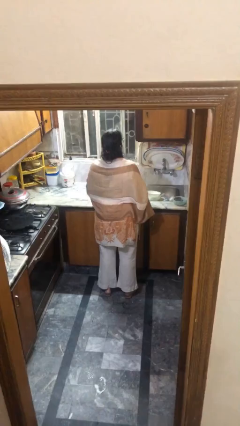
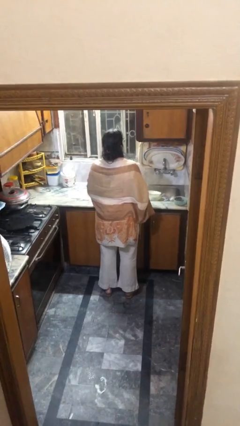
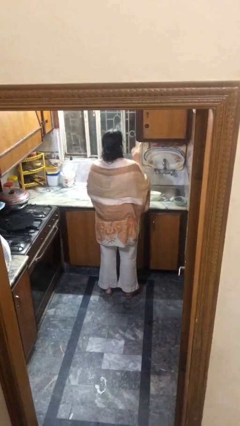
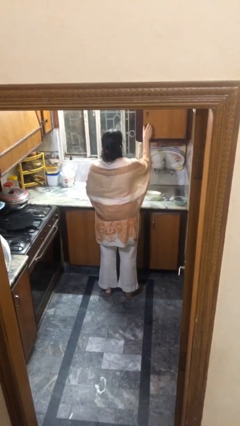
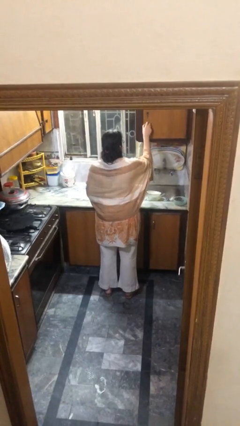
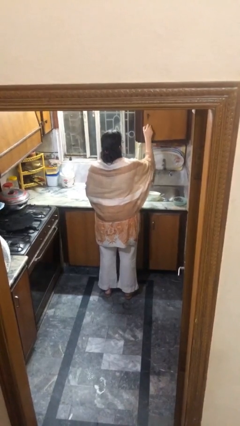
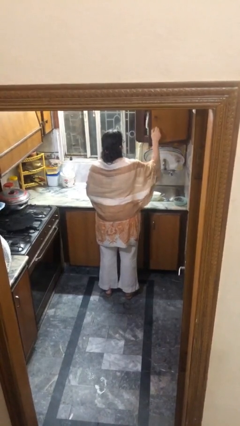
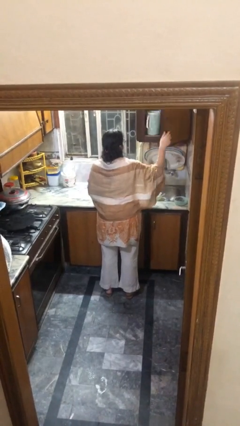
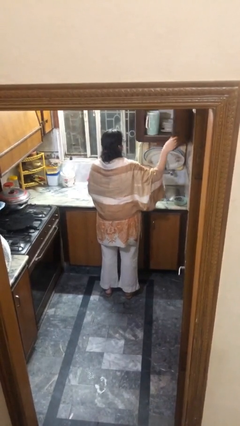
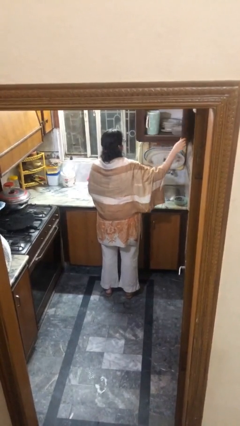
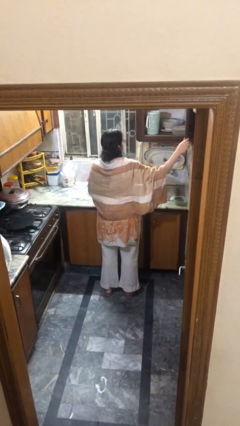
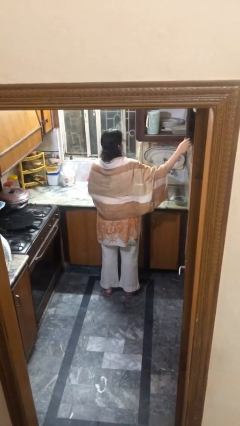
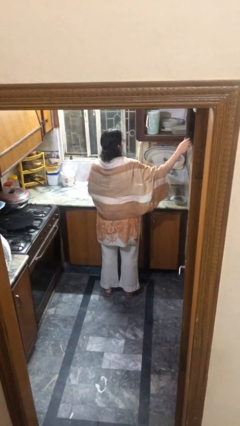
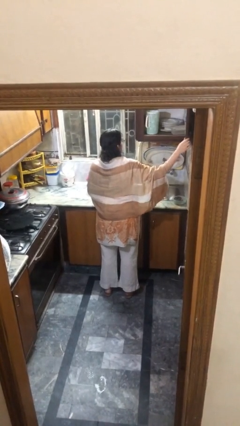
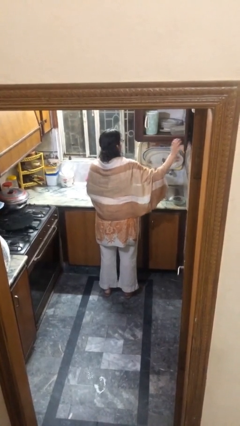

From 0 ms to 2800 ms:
person opens kitchen drawer

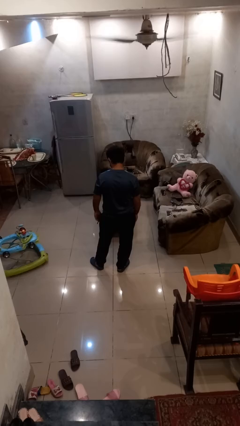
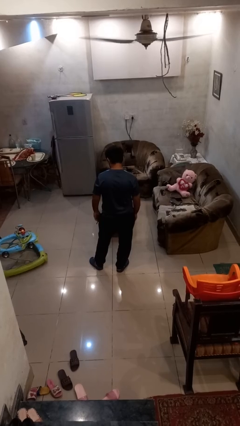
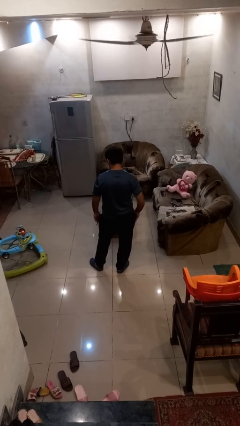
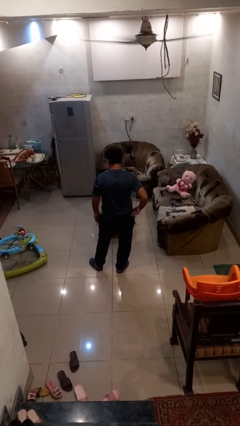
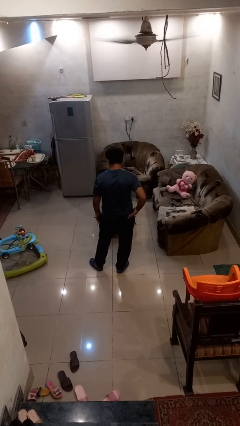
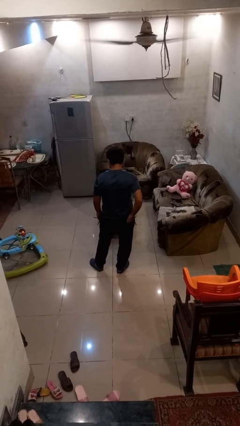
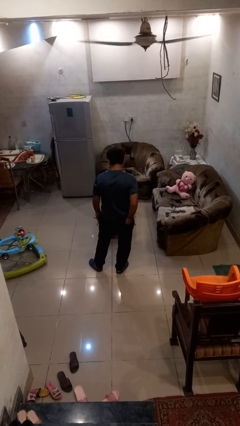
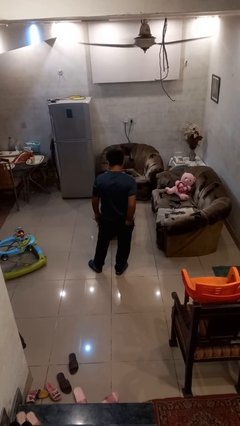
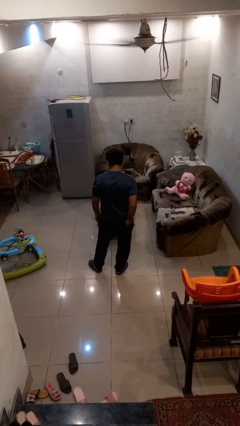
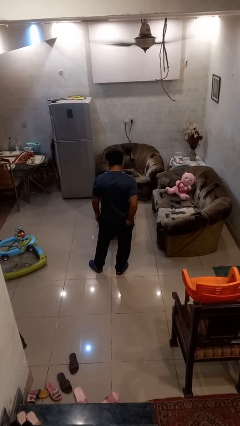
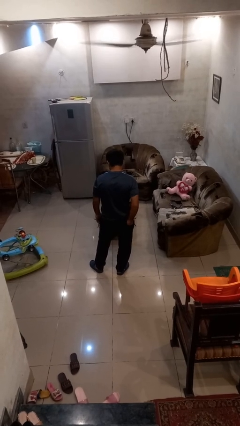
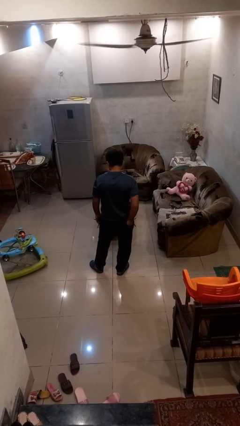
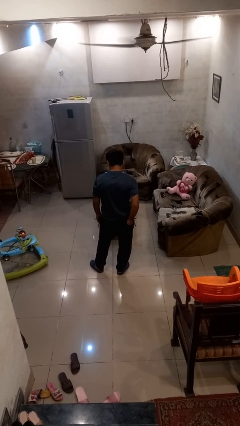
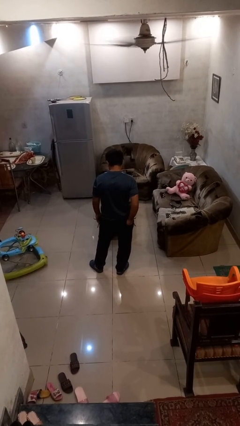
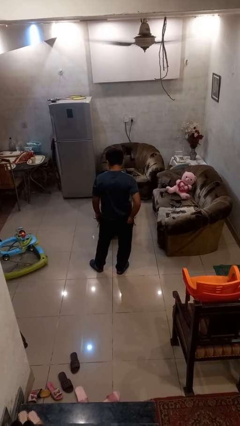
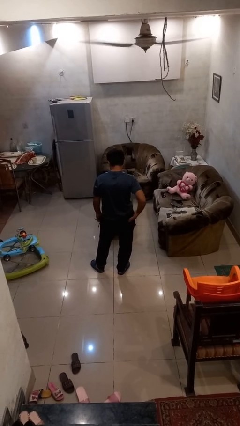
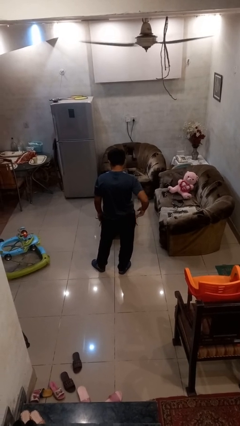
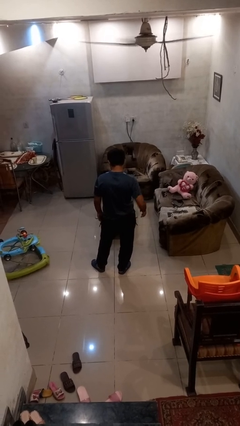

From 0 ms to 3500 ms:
person puts hands in back pockets

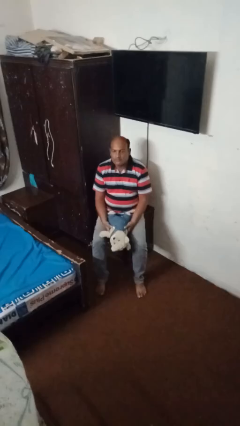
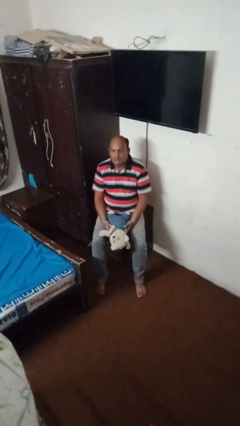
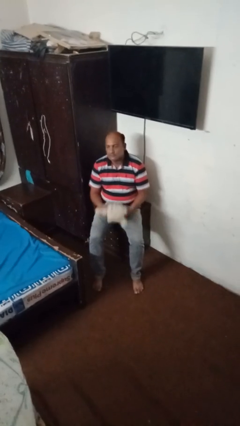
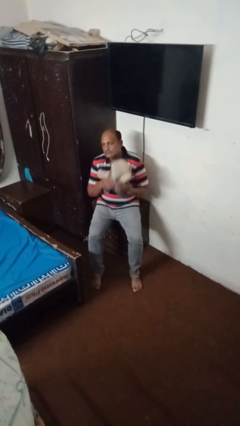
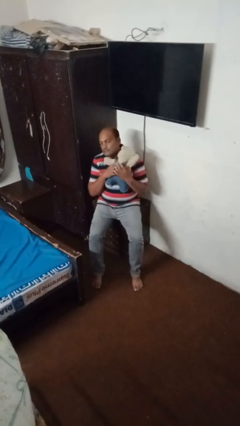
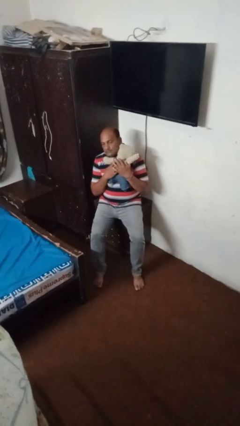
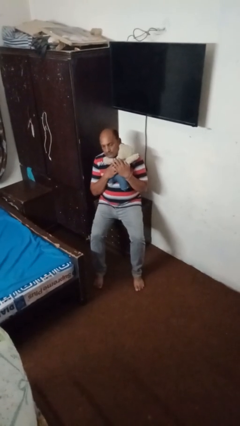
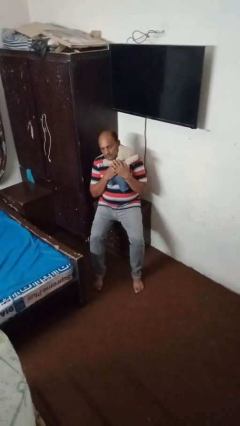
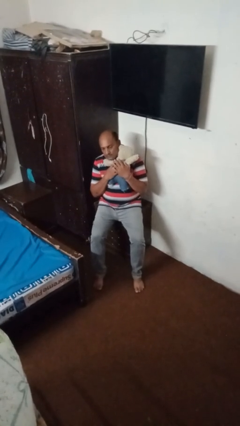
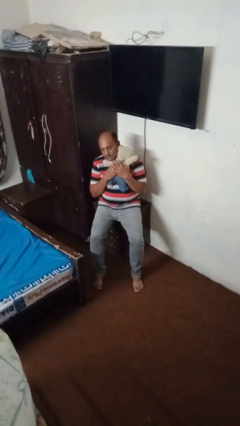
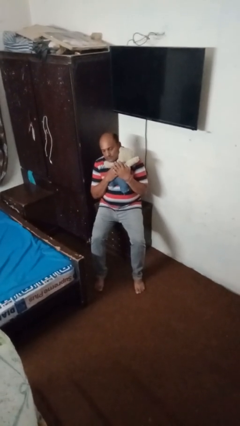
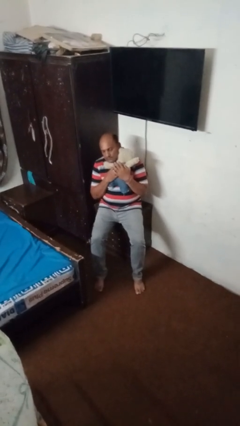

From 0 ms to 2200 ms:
person hugs stuffed animal

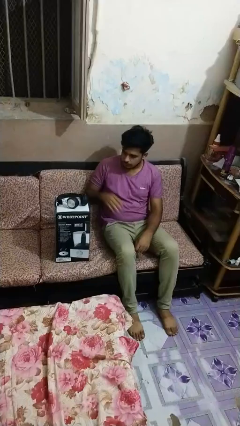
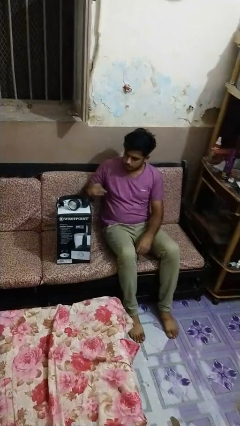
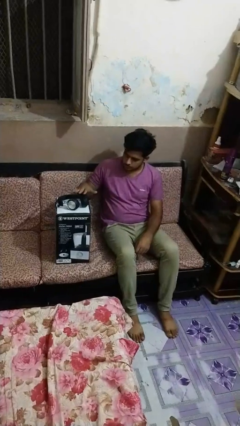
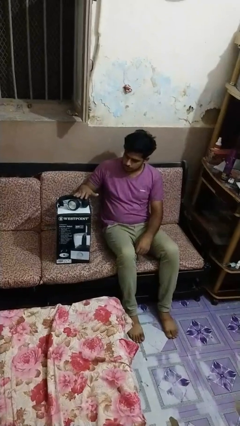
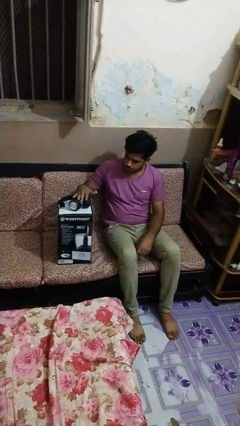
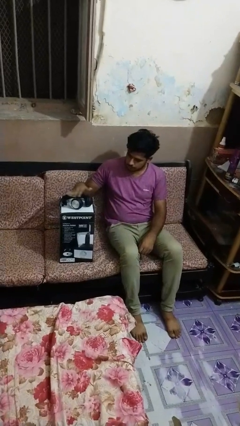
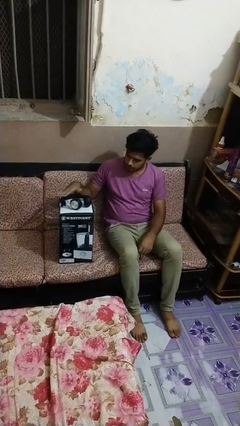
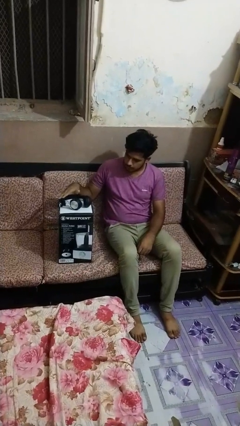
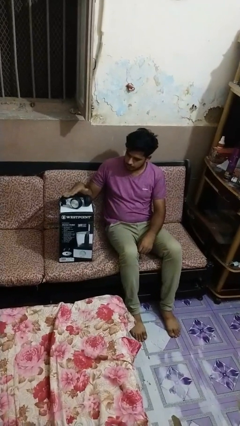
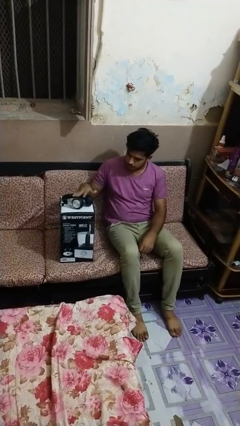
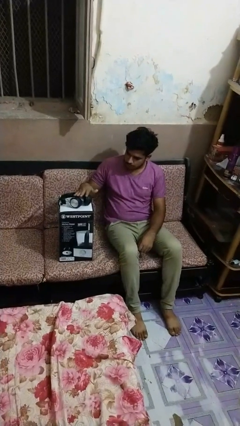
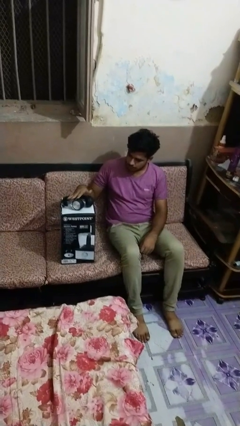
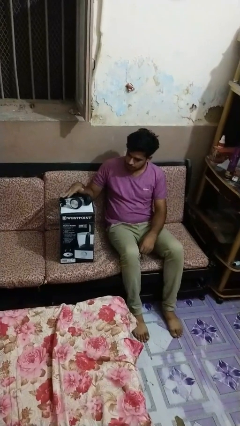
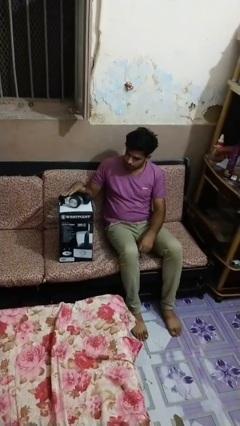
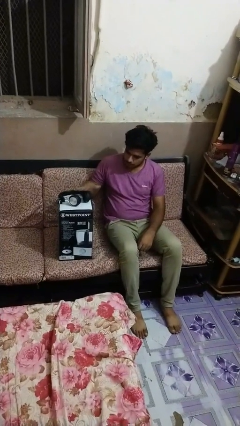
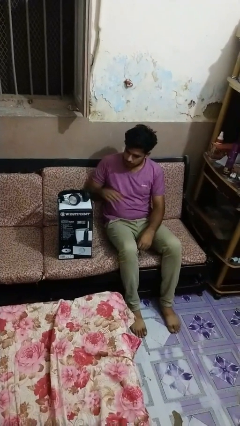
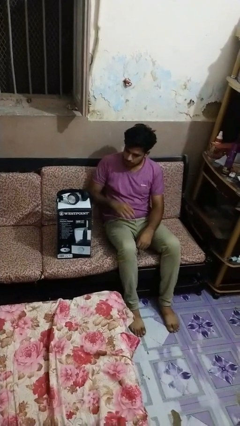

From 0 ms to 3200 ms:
person waves hand over object

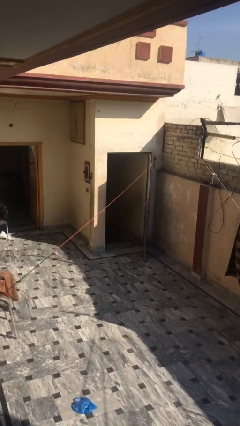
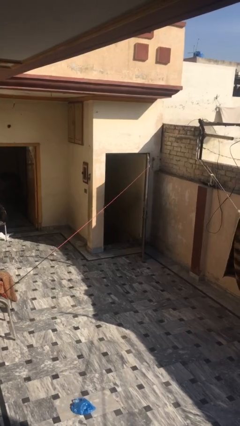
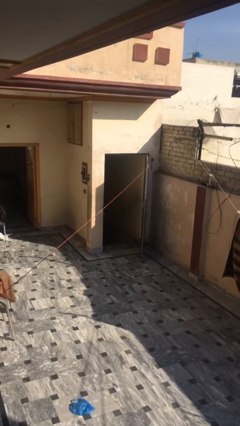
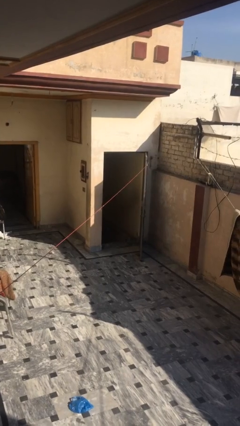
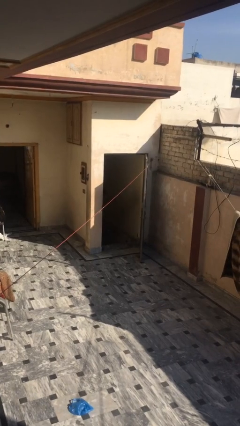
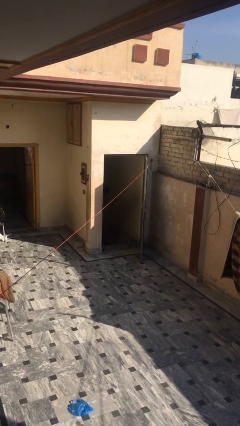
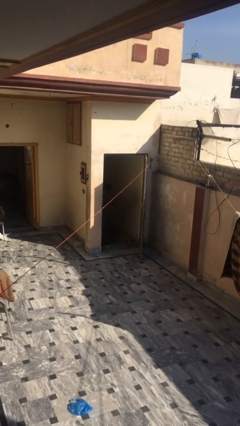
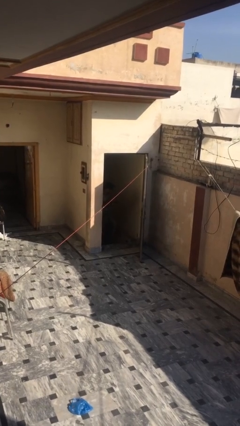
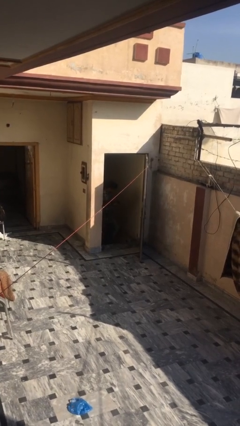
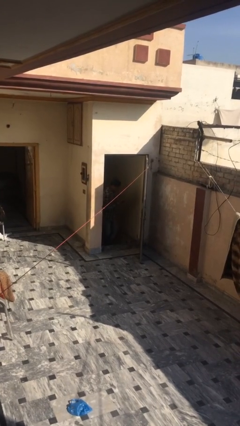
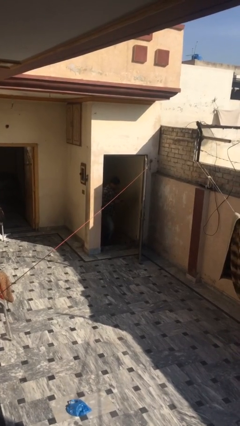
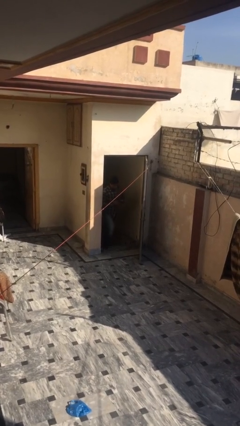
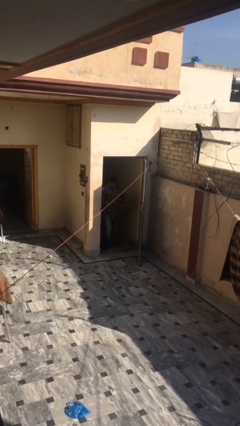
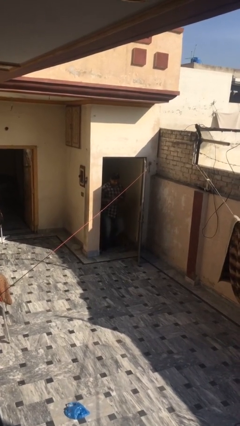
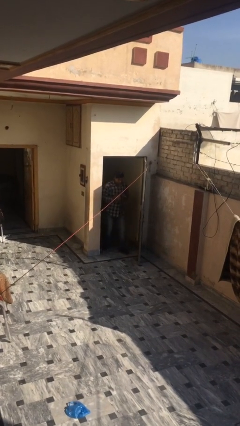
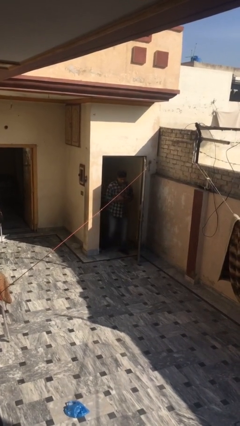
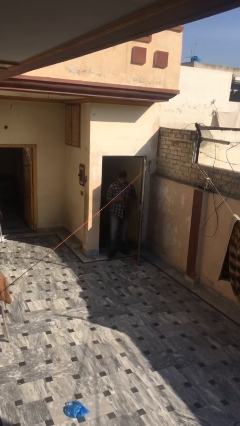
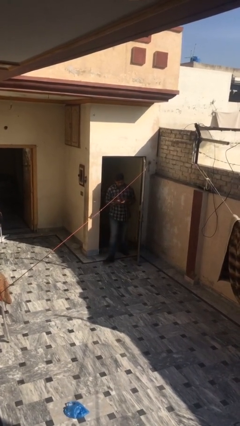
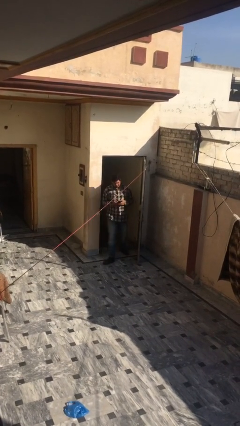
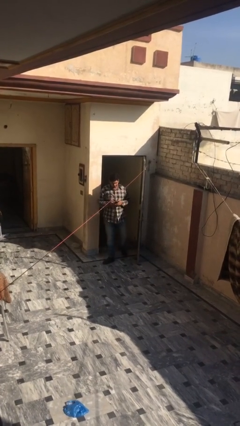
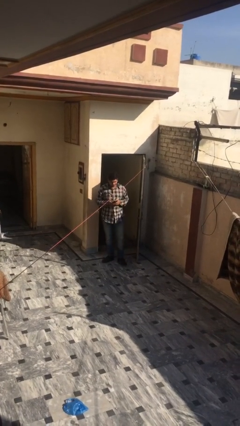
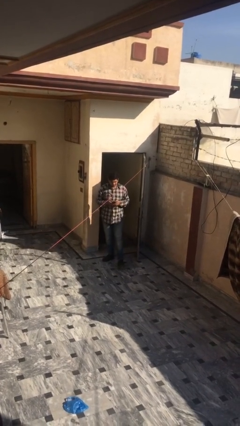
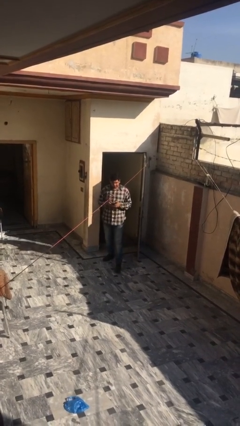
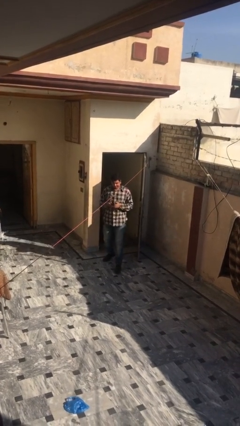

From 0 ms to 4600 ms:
person enters scene through structure

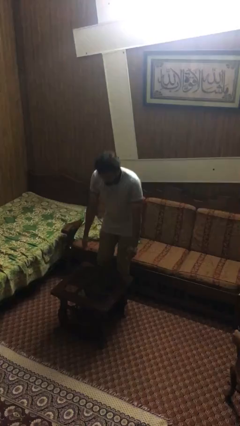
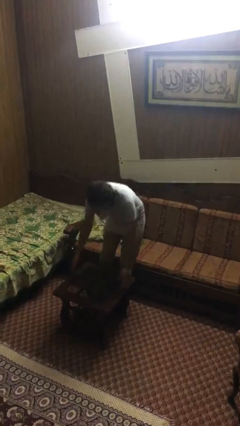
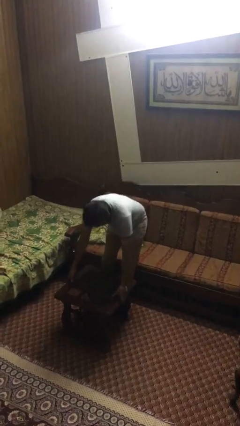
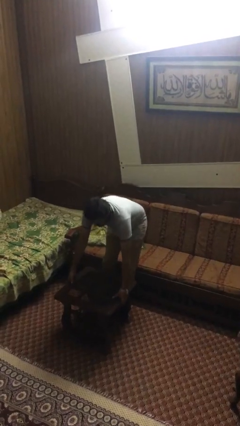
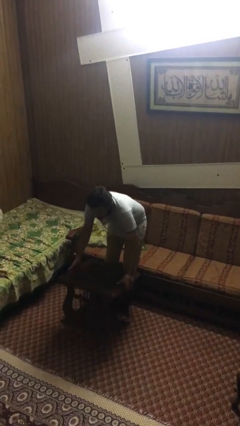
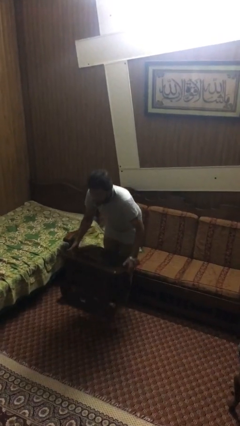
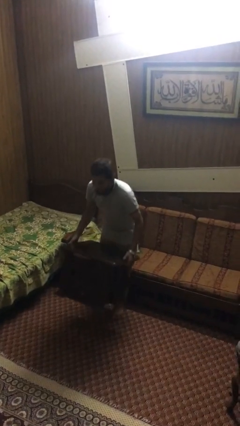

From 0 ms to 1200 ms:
person picks up object from floor
